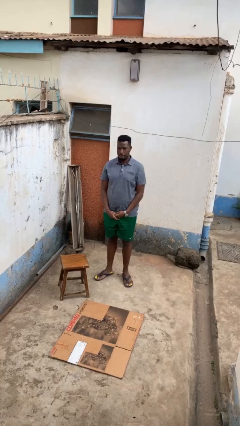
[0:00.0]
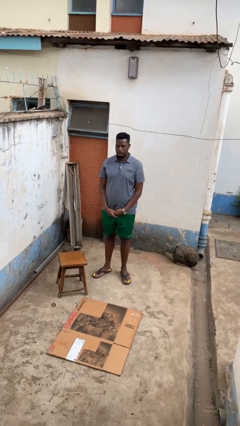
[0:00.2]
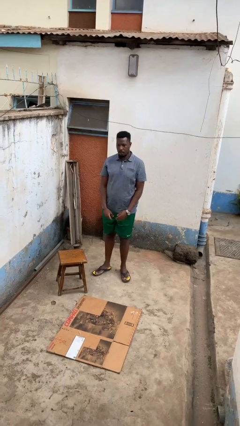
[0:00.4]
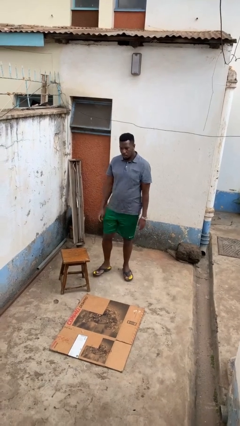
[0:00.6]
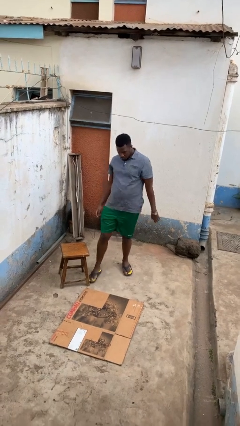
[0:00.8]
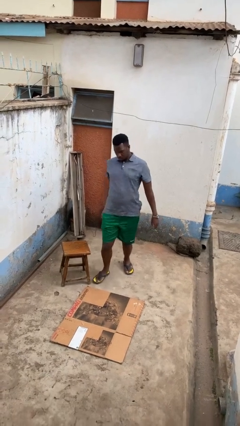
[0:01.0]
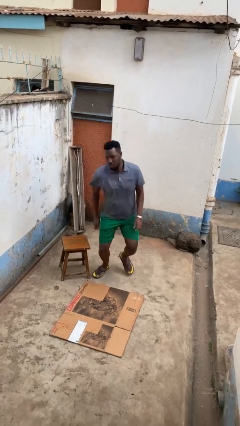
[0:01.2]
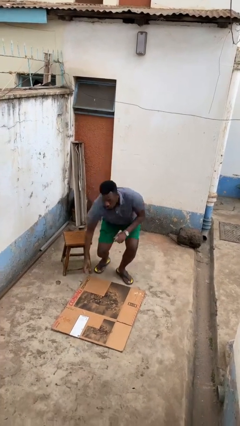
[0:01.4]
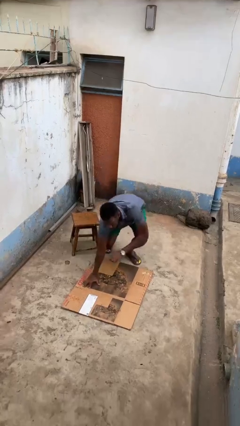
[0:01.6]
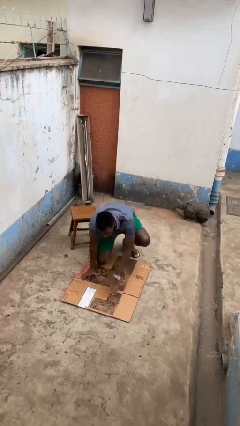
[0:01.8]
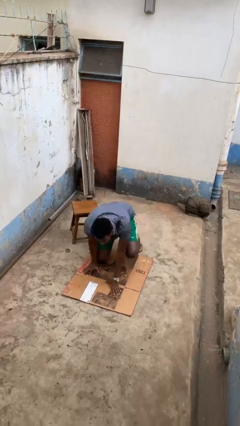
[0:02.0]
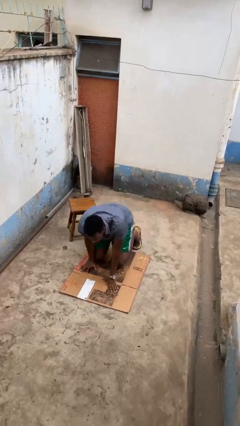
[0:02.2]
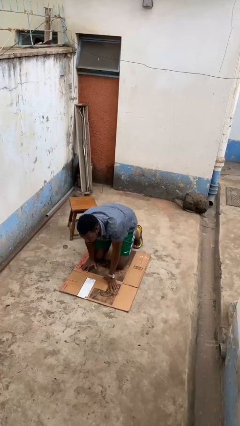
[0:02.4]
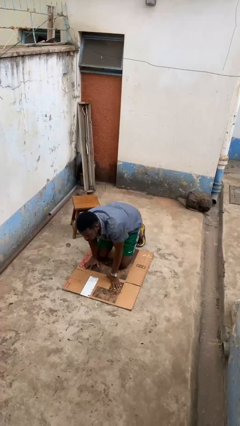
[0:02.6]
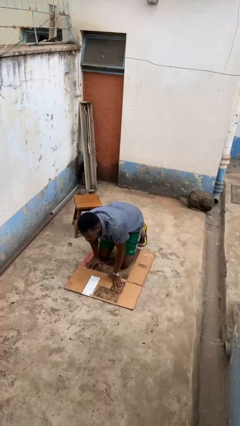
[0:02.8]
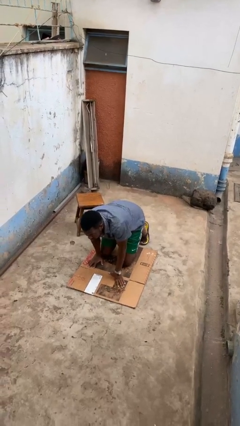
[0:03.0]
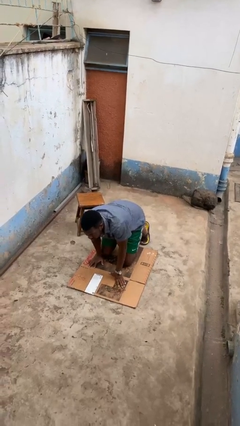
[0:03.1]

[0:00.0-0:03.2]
person trips on object on floor

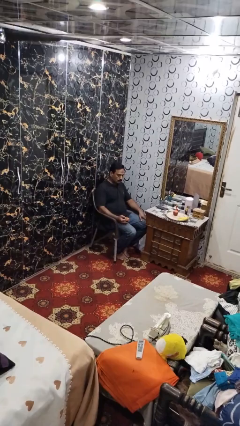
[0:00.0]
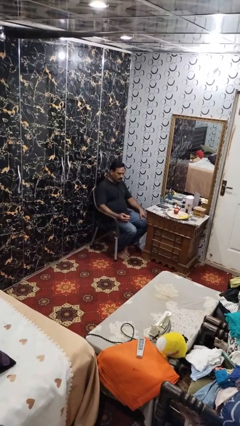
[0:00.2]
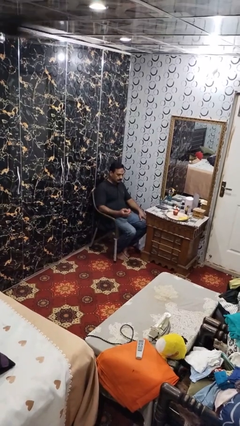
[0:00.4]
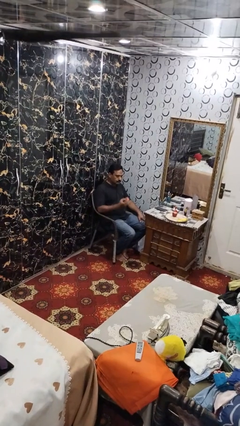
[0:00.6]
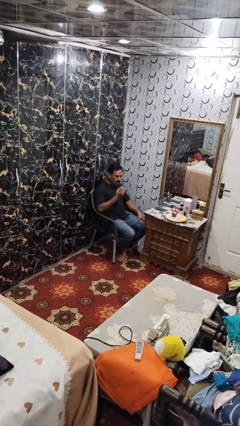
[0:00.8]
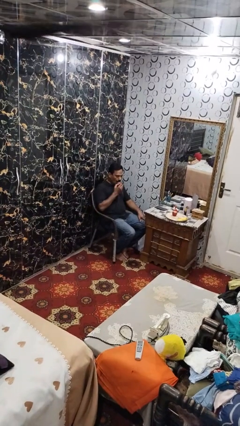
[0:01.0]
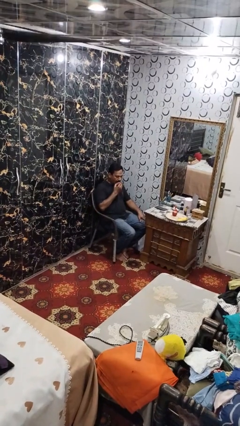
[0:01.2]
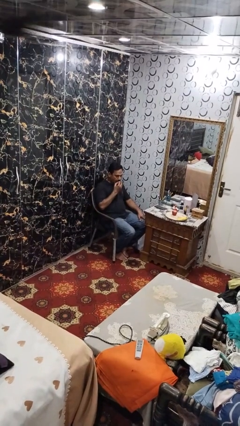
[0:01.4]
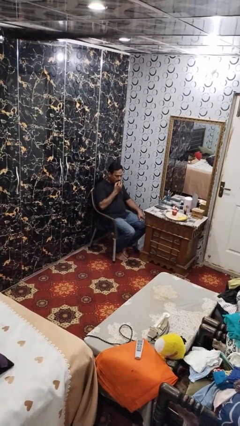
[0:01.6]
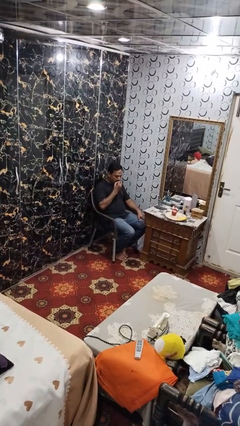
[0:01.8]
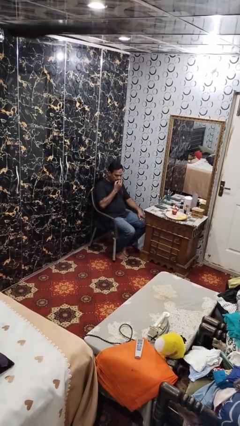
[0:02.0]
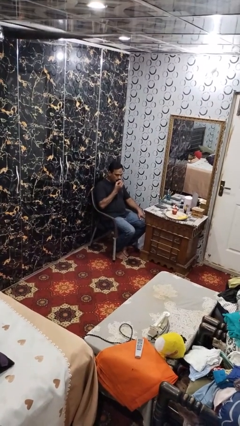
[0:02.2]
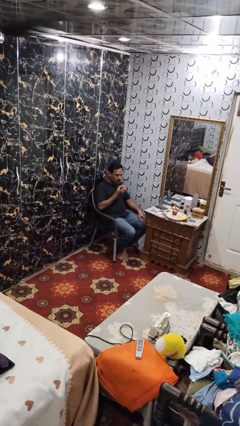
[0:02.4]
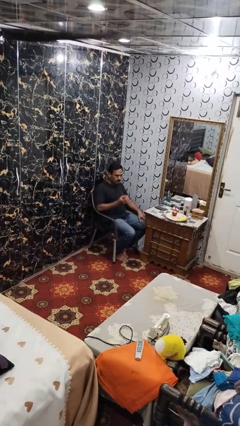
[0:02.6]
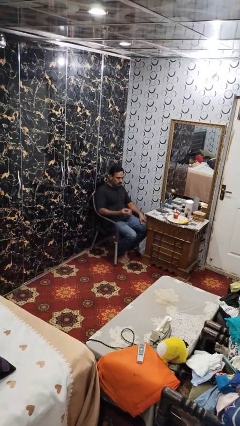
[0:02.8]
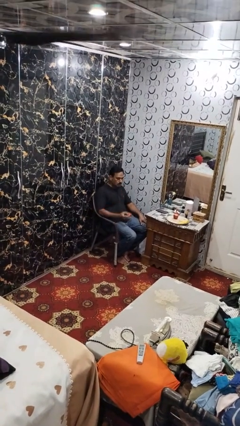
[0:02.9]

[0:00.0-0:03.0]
person eats apple

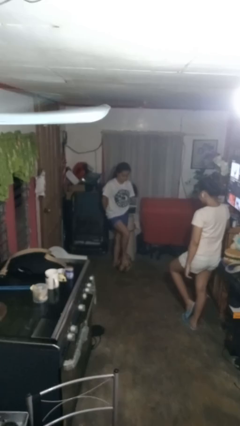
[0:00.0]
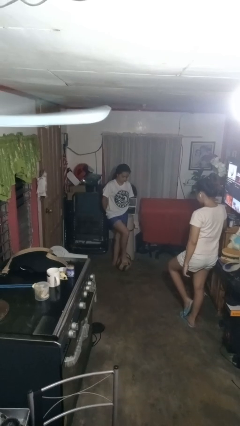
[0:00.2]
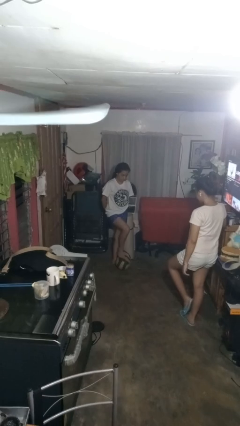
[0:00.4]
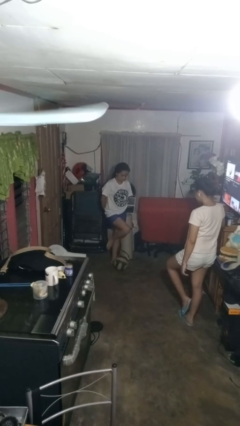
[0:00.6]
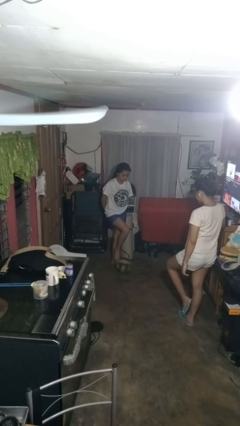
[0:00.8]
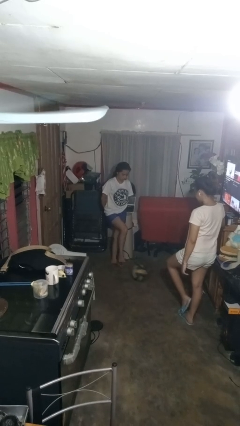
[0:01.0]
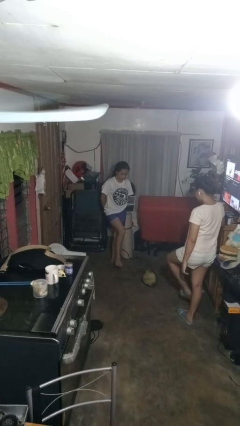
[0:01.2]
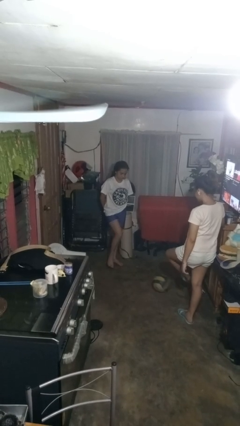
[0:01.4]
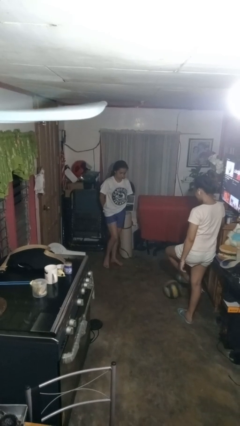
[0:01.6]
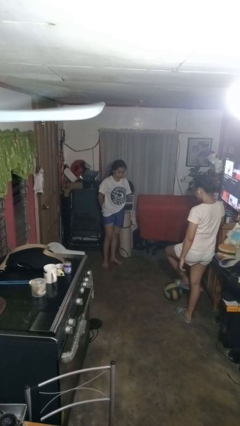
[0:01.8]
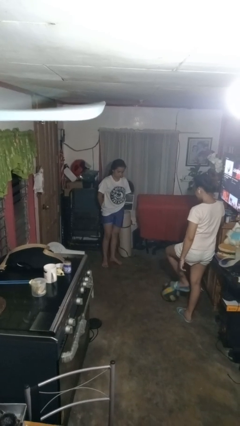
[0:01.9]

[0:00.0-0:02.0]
person kicks object to person

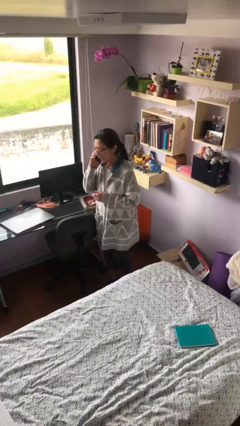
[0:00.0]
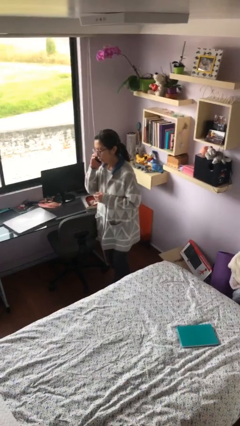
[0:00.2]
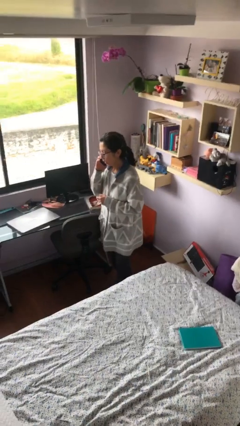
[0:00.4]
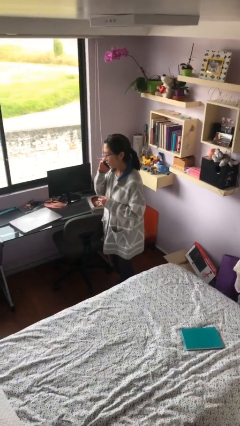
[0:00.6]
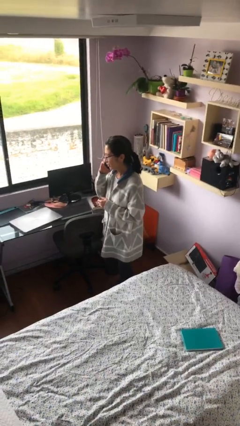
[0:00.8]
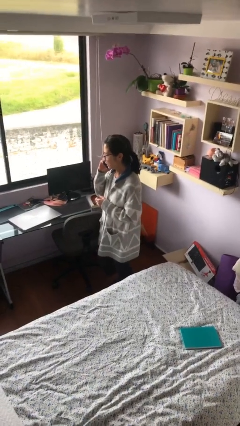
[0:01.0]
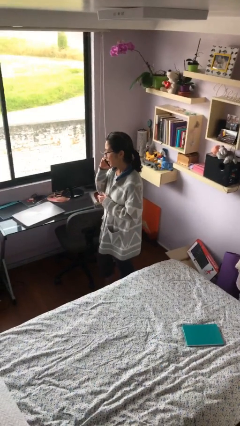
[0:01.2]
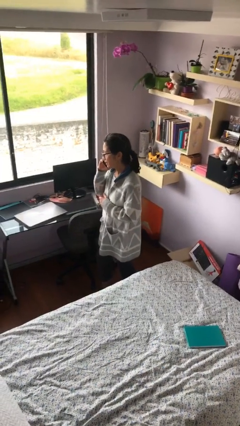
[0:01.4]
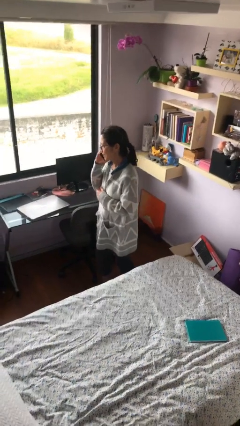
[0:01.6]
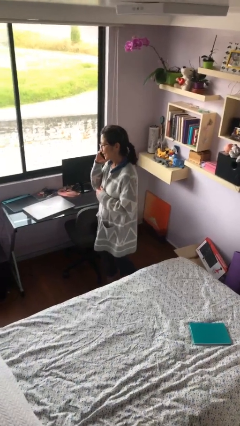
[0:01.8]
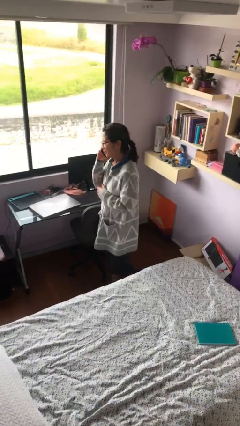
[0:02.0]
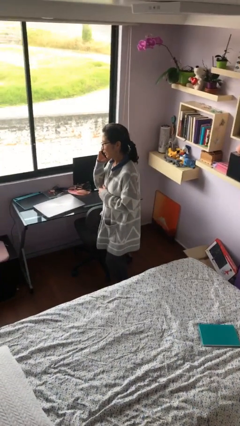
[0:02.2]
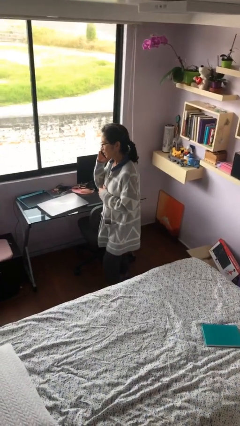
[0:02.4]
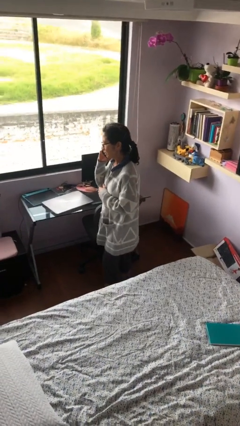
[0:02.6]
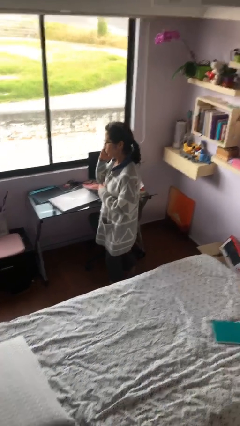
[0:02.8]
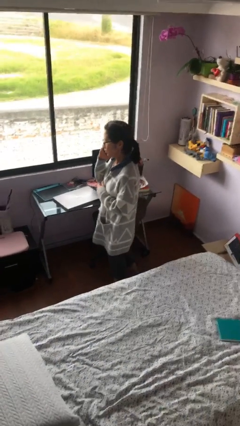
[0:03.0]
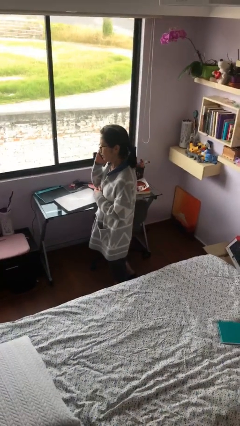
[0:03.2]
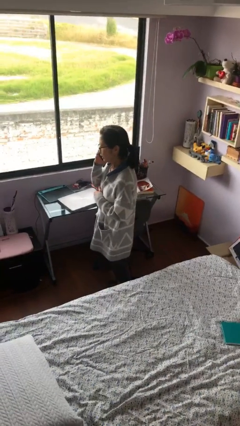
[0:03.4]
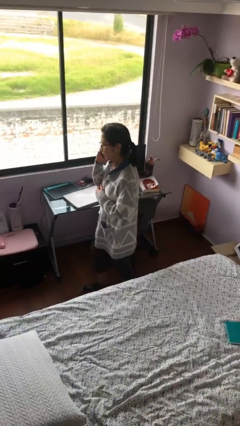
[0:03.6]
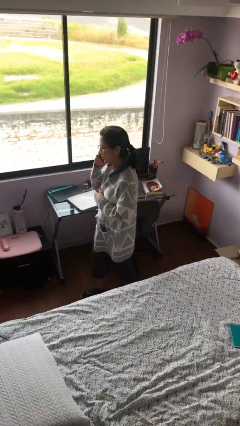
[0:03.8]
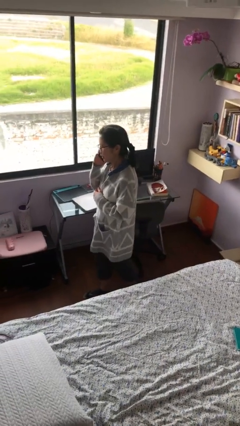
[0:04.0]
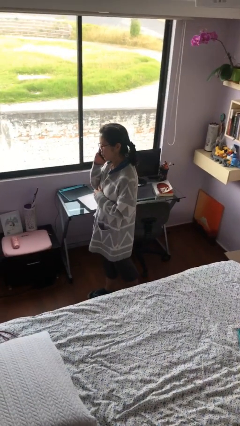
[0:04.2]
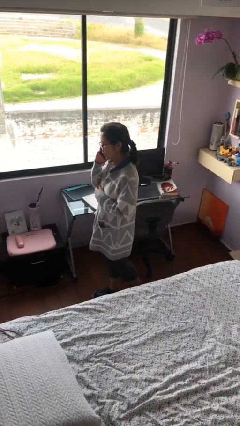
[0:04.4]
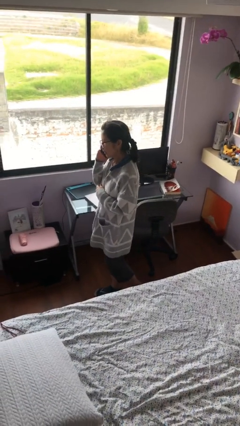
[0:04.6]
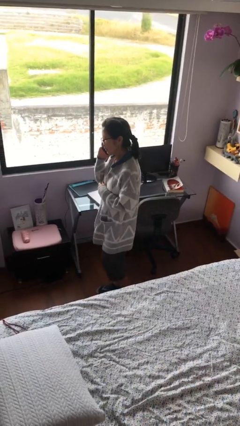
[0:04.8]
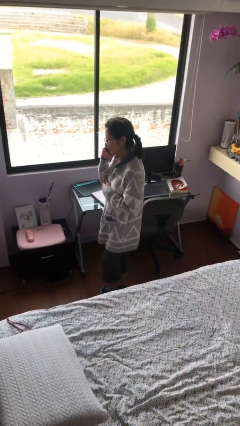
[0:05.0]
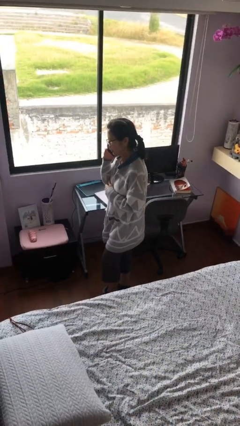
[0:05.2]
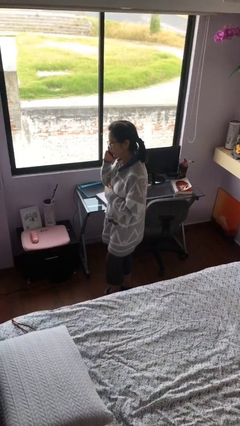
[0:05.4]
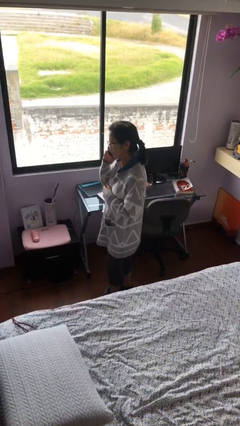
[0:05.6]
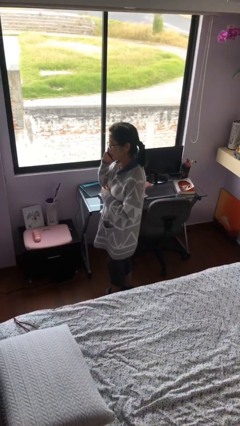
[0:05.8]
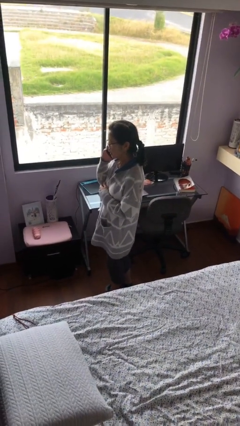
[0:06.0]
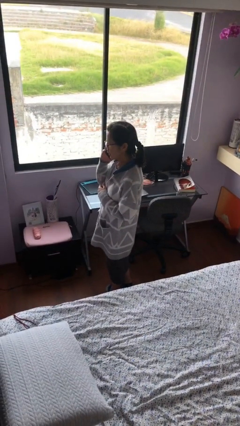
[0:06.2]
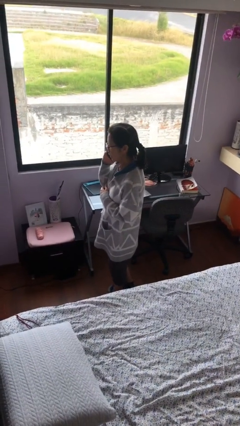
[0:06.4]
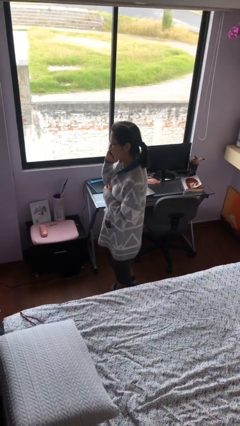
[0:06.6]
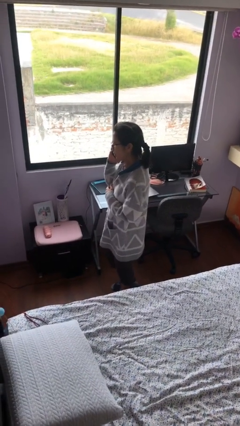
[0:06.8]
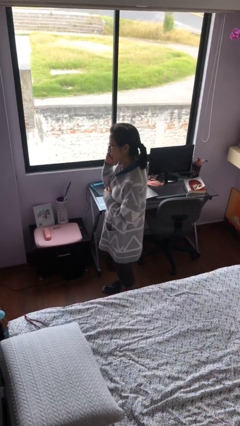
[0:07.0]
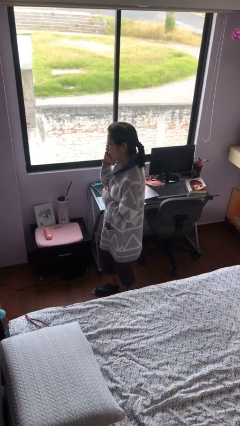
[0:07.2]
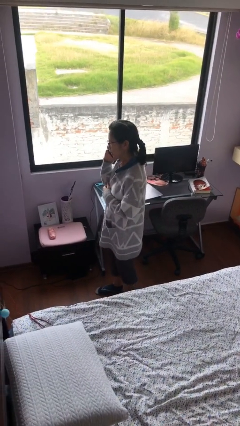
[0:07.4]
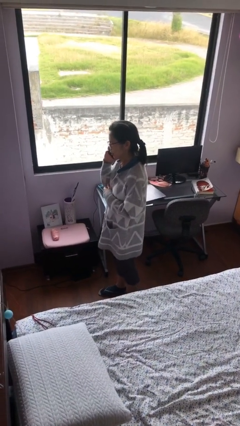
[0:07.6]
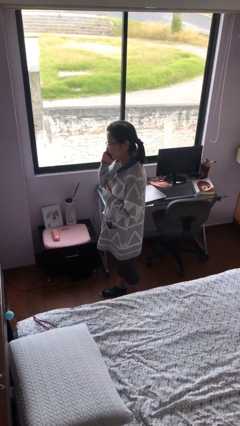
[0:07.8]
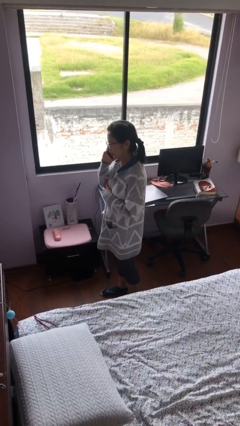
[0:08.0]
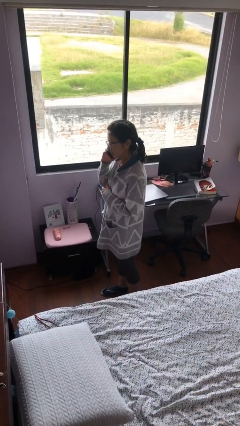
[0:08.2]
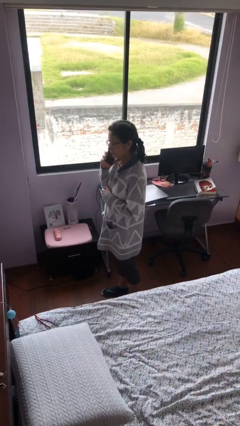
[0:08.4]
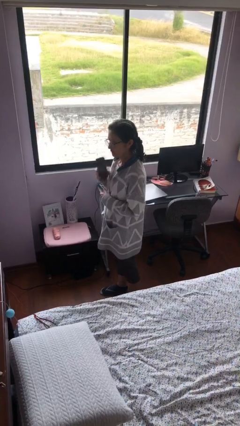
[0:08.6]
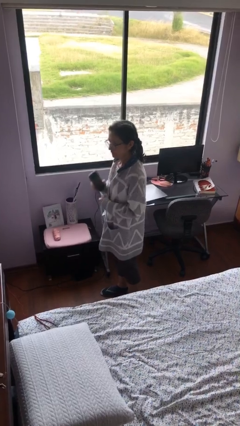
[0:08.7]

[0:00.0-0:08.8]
person talks on phone

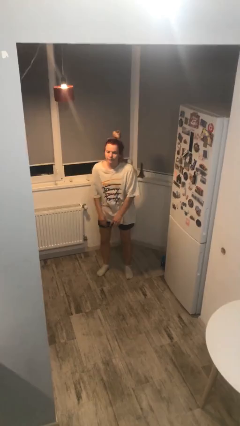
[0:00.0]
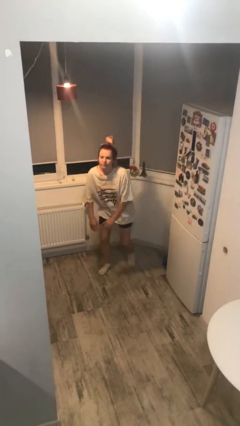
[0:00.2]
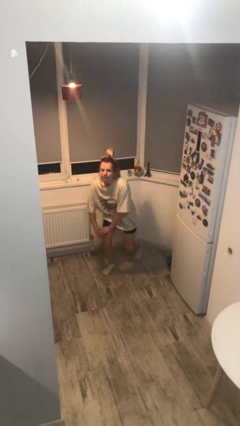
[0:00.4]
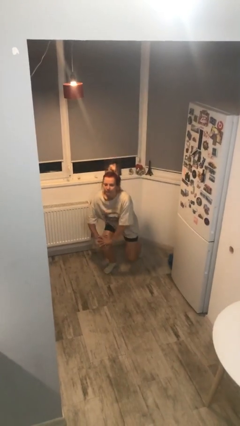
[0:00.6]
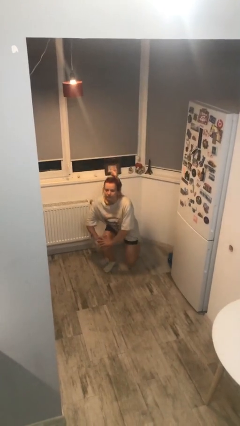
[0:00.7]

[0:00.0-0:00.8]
person kneels
